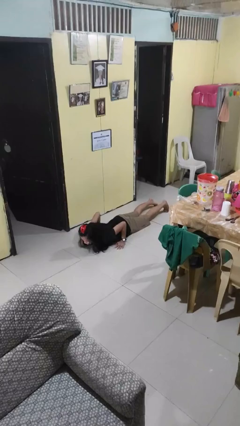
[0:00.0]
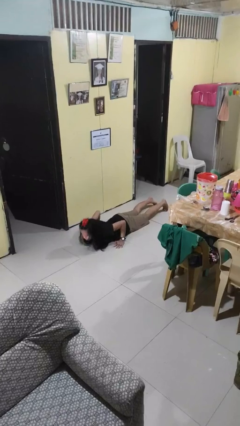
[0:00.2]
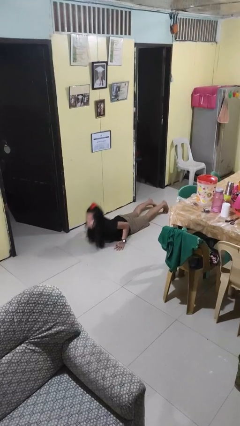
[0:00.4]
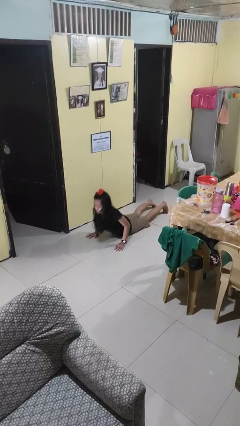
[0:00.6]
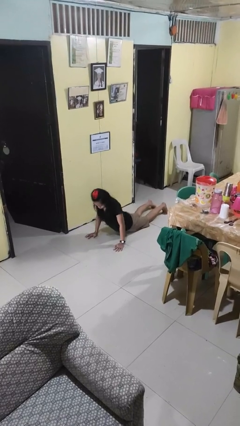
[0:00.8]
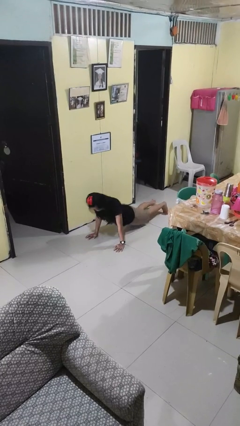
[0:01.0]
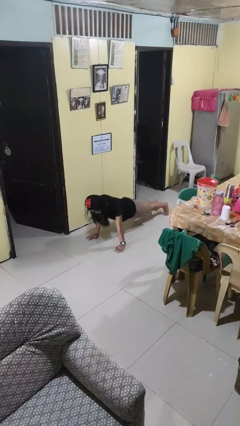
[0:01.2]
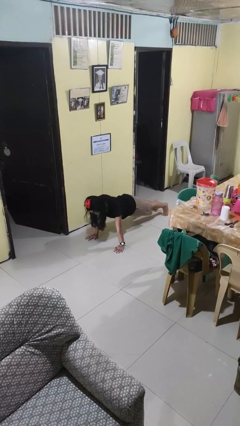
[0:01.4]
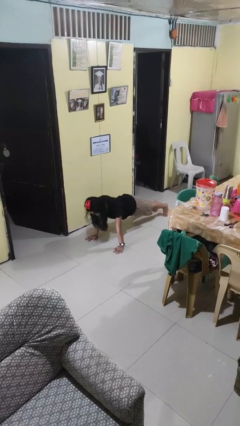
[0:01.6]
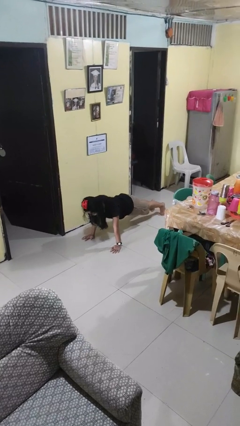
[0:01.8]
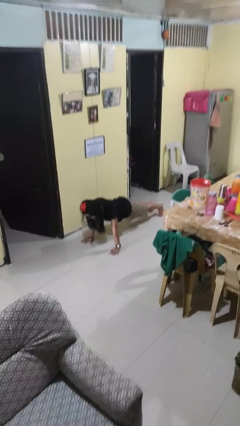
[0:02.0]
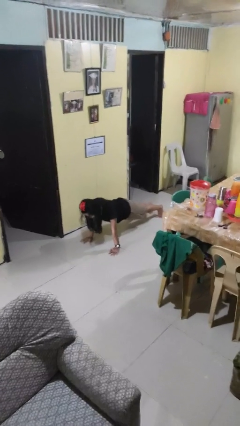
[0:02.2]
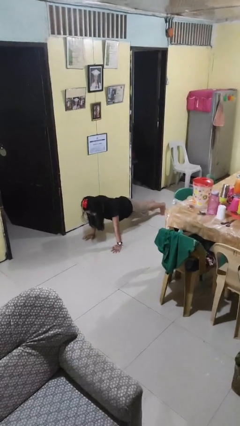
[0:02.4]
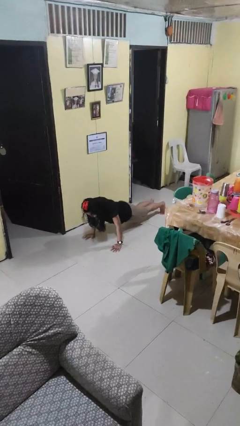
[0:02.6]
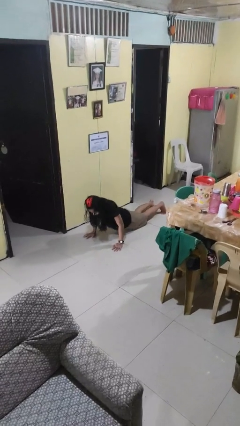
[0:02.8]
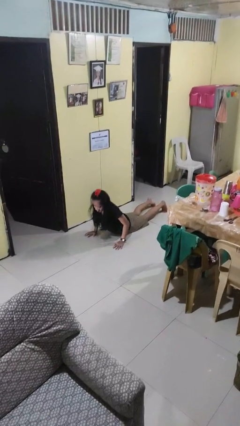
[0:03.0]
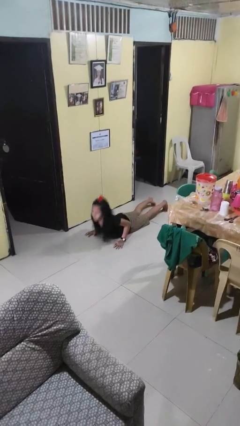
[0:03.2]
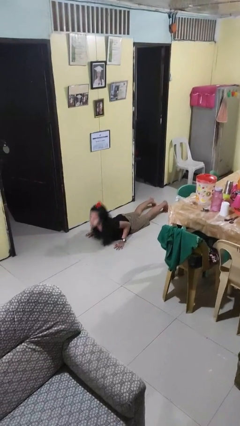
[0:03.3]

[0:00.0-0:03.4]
person exercises with pushup

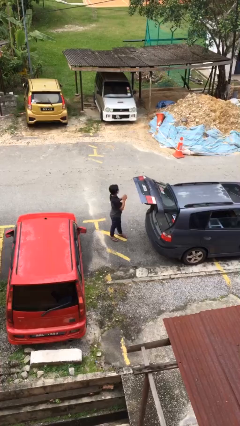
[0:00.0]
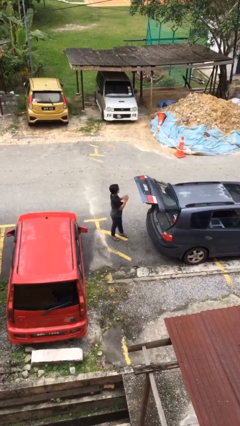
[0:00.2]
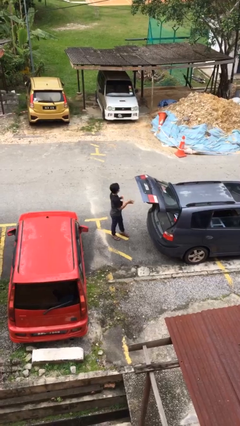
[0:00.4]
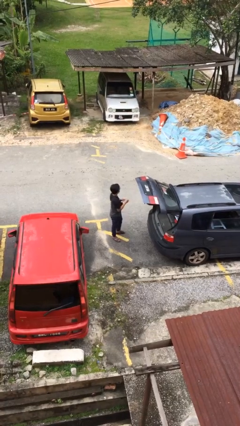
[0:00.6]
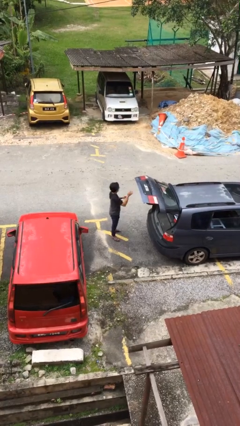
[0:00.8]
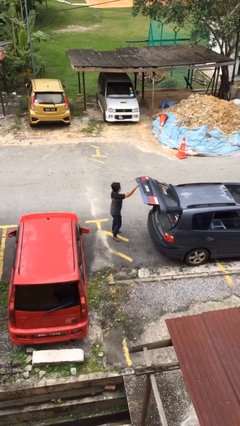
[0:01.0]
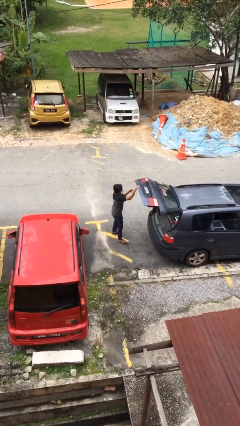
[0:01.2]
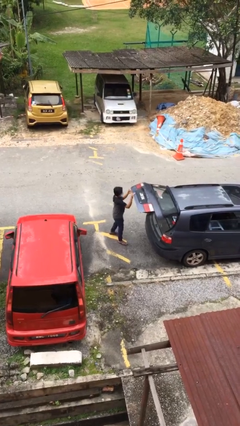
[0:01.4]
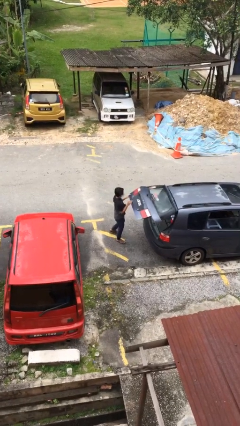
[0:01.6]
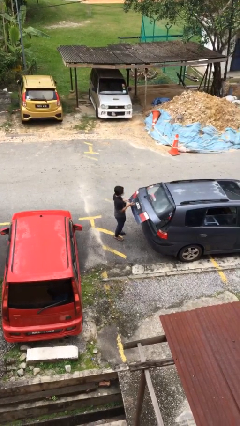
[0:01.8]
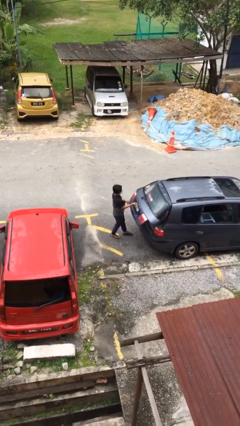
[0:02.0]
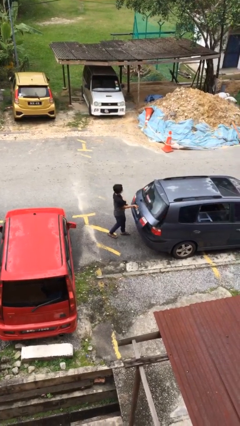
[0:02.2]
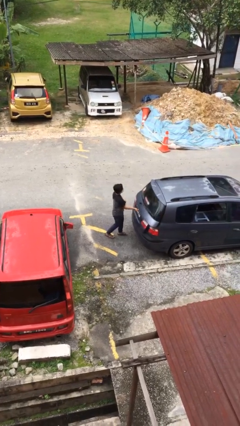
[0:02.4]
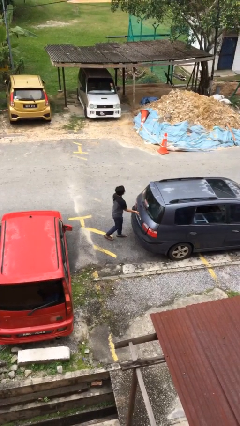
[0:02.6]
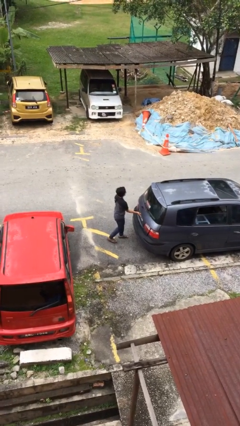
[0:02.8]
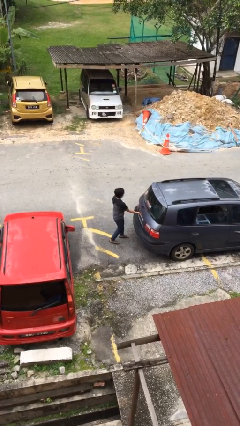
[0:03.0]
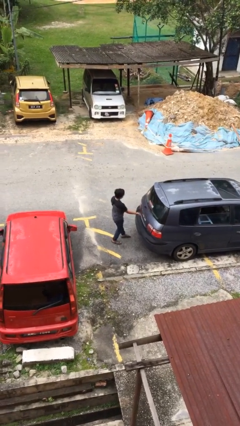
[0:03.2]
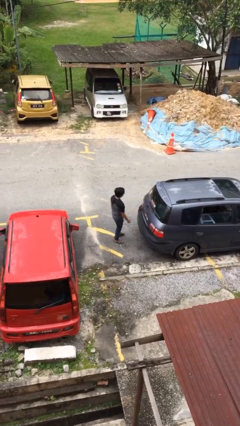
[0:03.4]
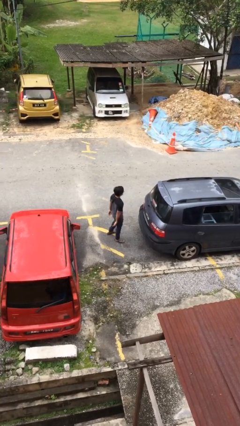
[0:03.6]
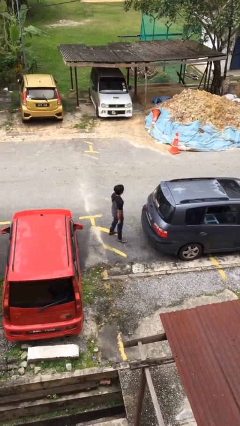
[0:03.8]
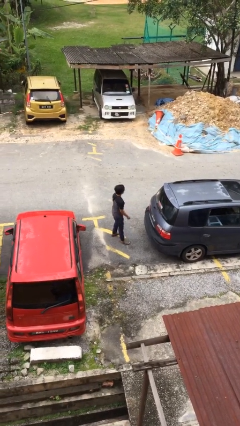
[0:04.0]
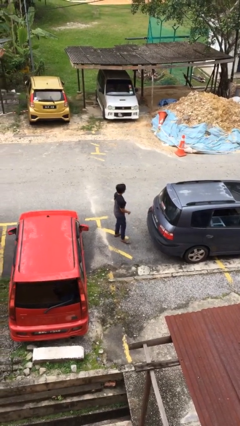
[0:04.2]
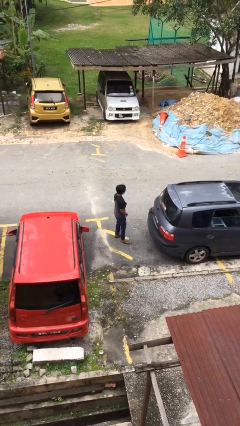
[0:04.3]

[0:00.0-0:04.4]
person closes car trunk

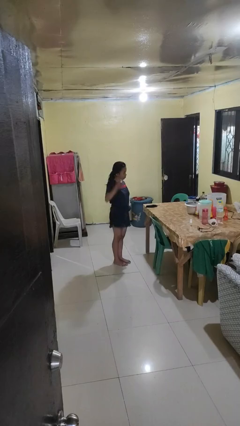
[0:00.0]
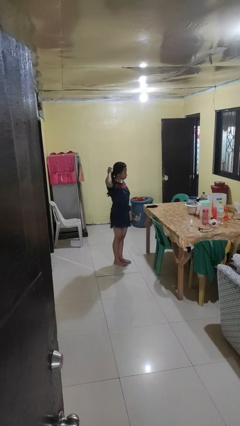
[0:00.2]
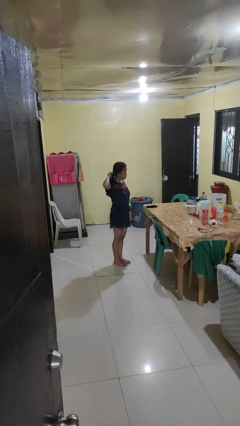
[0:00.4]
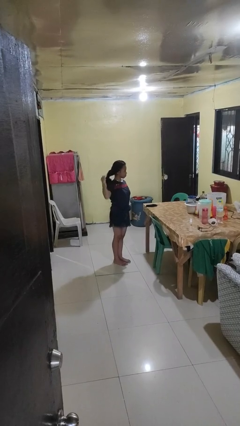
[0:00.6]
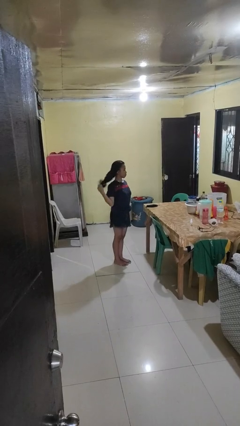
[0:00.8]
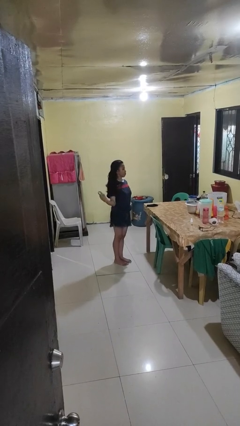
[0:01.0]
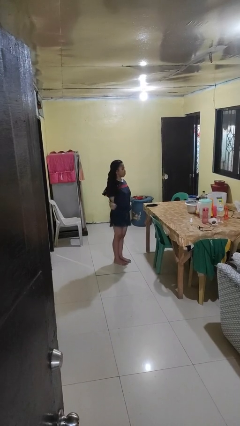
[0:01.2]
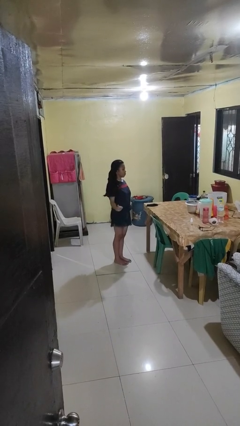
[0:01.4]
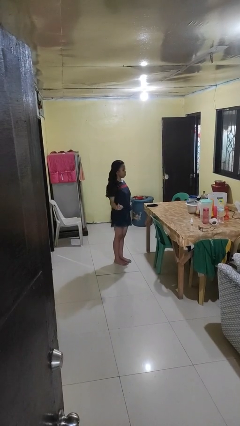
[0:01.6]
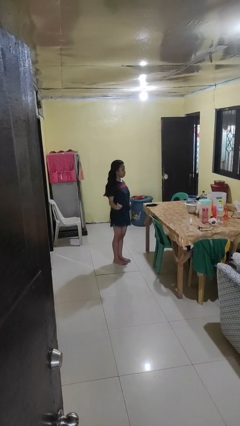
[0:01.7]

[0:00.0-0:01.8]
person takes off hairtie

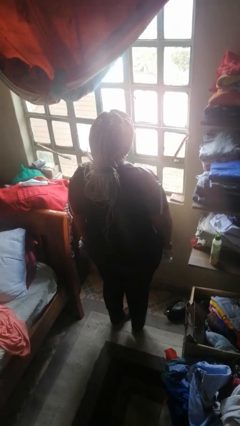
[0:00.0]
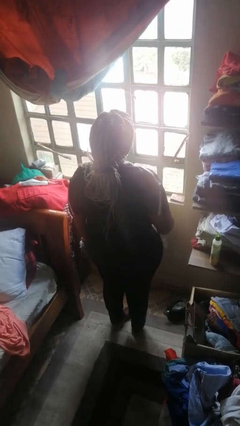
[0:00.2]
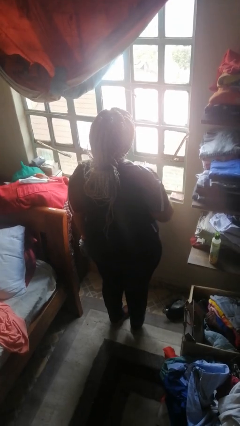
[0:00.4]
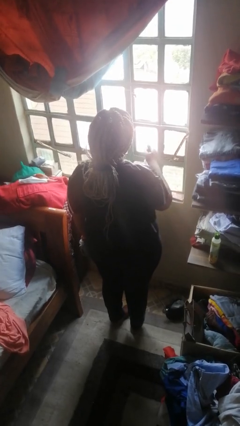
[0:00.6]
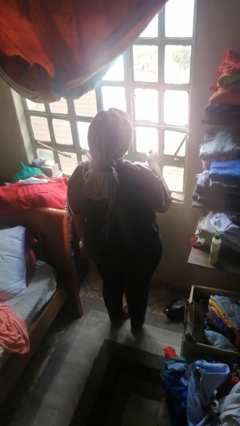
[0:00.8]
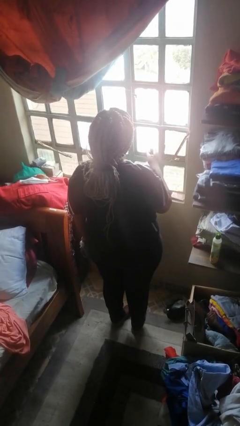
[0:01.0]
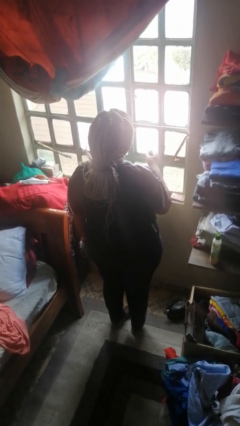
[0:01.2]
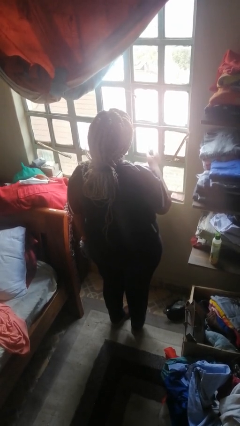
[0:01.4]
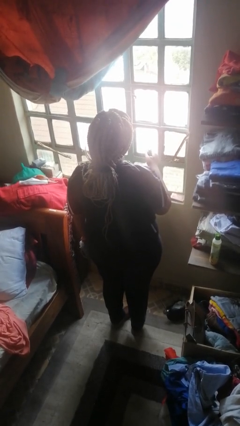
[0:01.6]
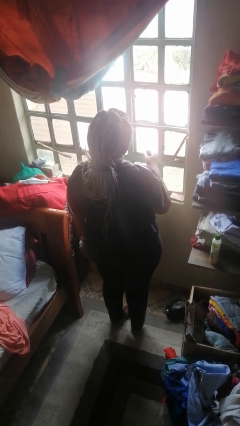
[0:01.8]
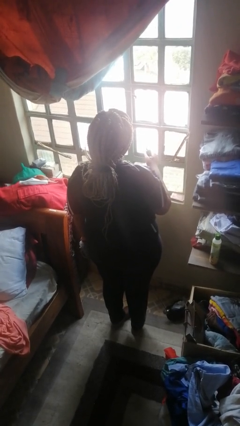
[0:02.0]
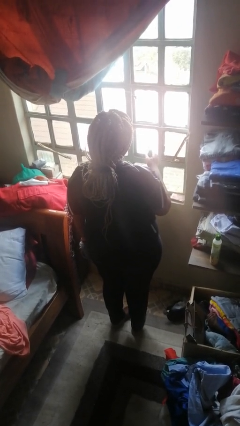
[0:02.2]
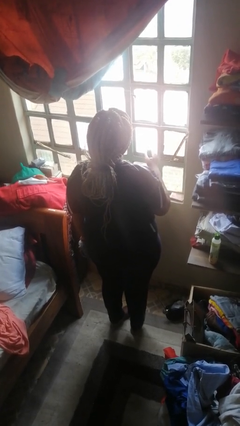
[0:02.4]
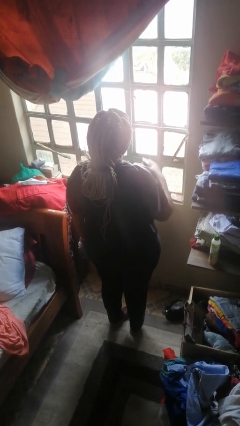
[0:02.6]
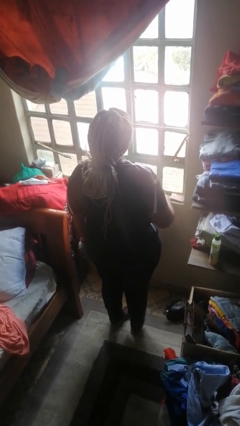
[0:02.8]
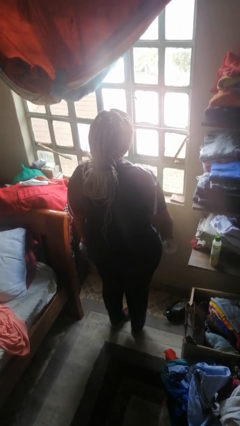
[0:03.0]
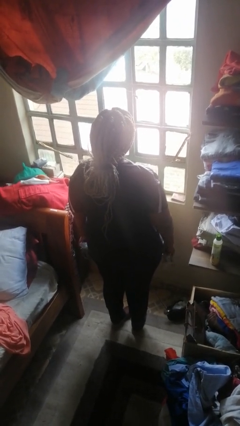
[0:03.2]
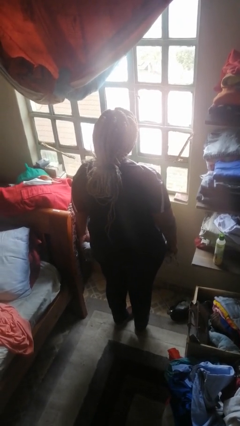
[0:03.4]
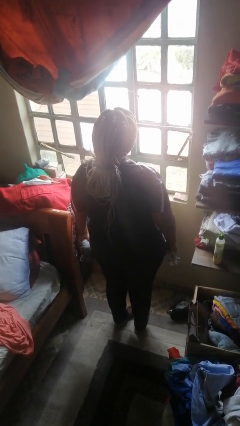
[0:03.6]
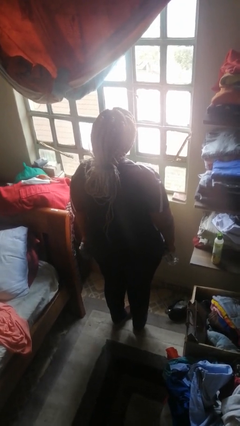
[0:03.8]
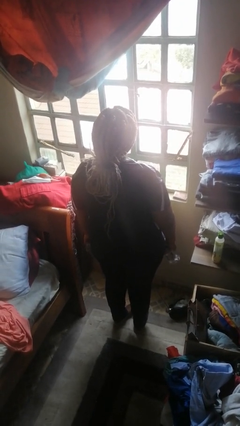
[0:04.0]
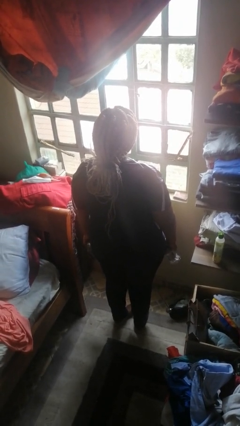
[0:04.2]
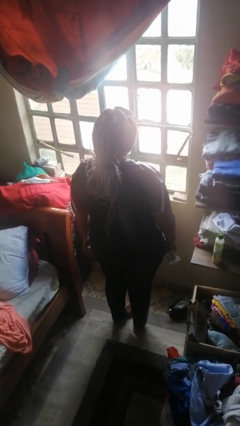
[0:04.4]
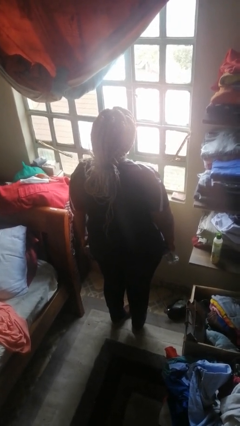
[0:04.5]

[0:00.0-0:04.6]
person sprays from bottle

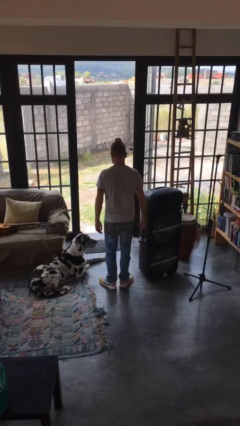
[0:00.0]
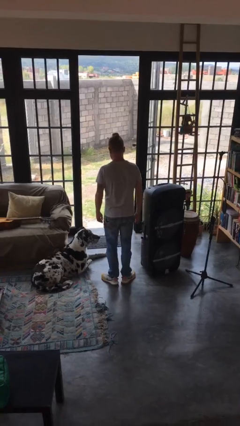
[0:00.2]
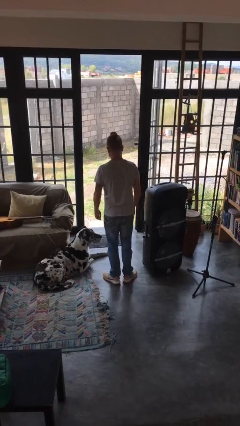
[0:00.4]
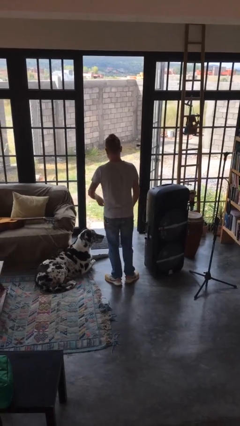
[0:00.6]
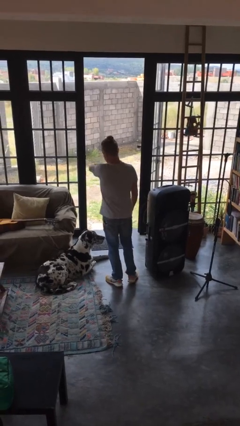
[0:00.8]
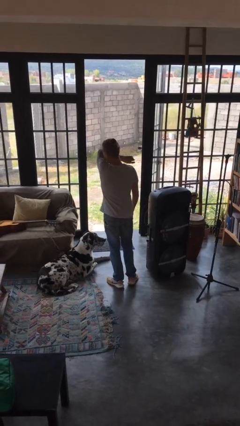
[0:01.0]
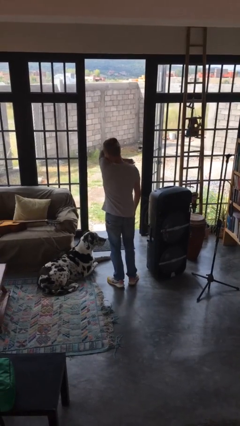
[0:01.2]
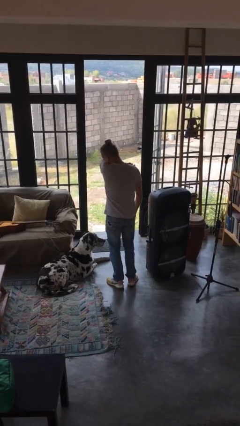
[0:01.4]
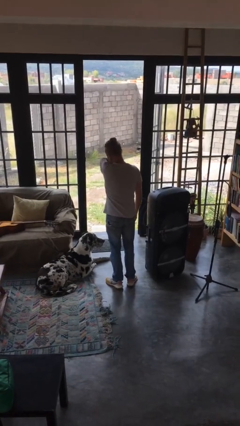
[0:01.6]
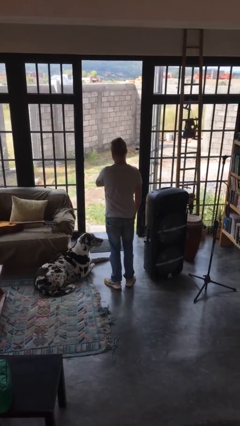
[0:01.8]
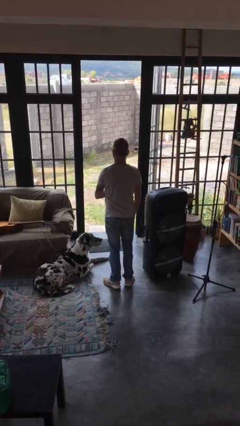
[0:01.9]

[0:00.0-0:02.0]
person sneezes into arm

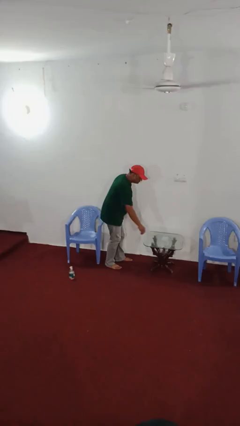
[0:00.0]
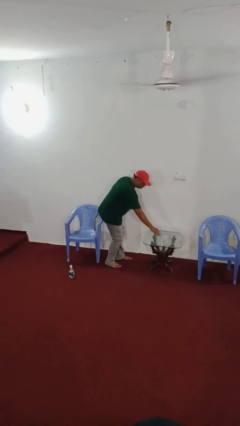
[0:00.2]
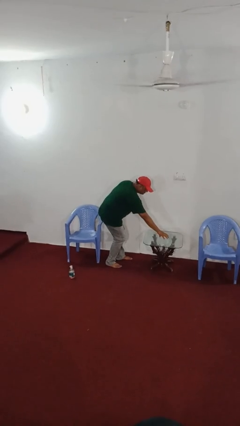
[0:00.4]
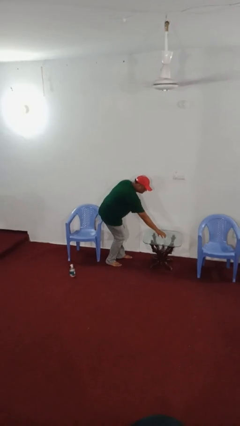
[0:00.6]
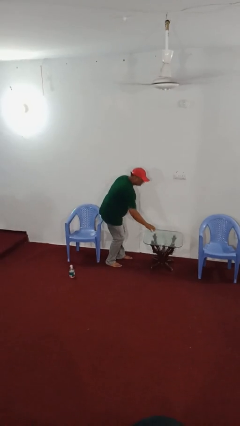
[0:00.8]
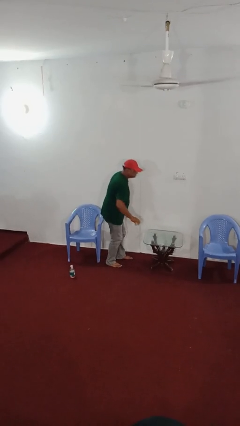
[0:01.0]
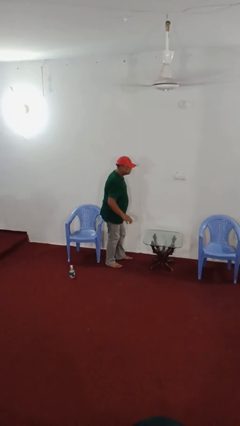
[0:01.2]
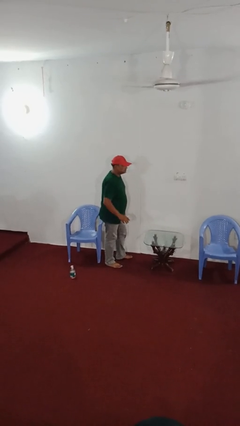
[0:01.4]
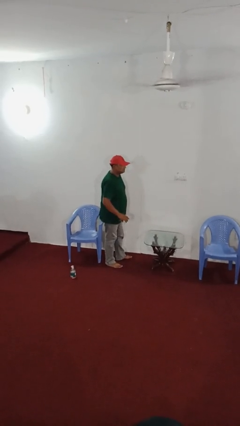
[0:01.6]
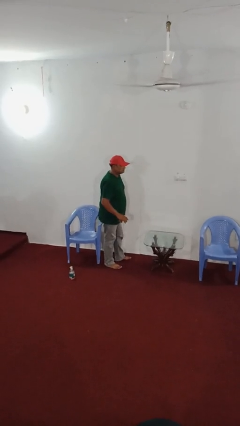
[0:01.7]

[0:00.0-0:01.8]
person picks up object from table
